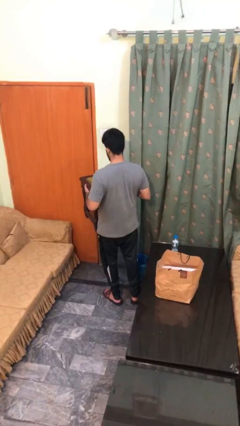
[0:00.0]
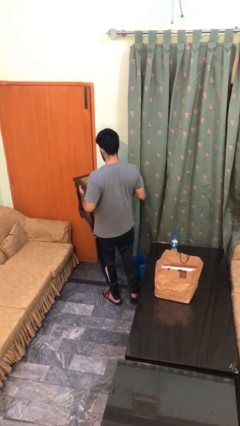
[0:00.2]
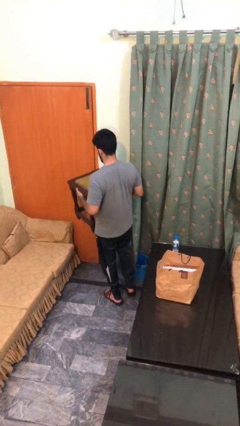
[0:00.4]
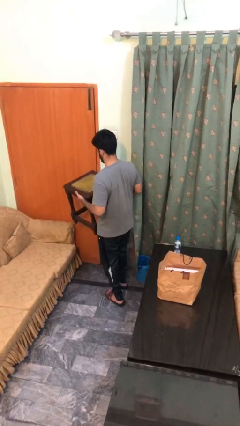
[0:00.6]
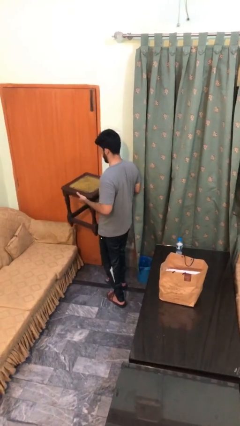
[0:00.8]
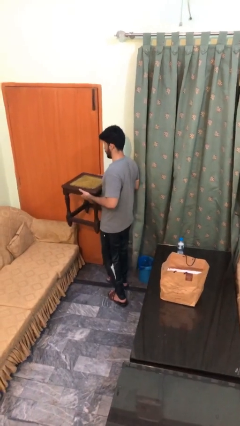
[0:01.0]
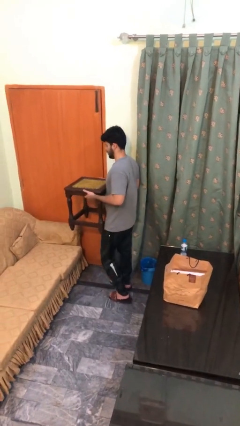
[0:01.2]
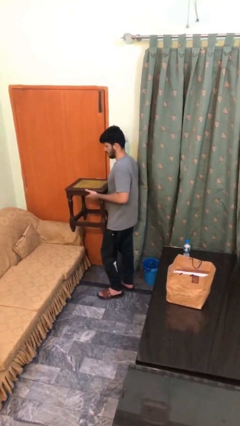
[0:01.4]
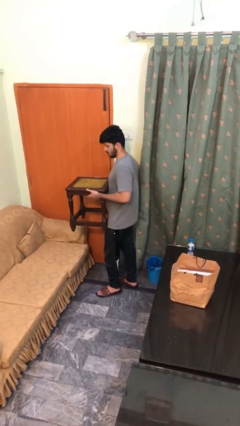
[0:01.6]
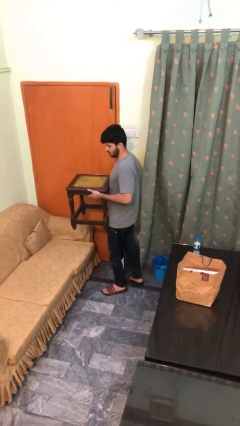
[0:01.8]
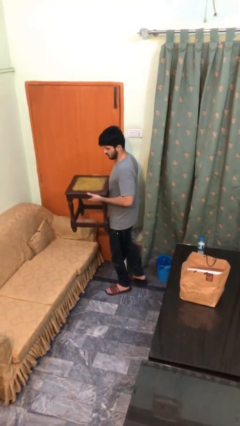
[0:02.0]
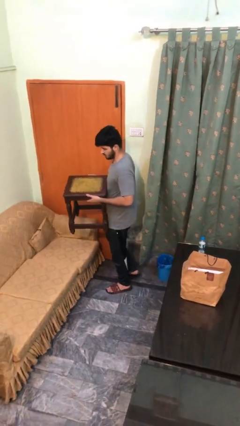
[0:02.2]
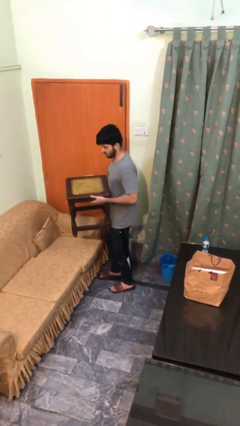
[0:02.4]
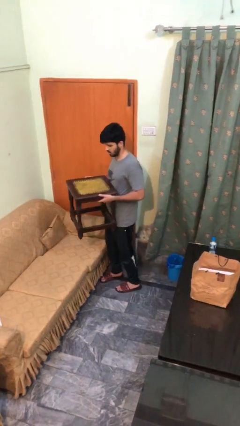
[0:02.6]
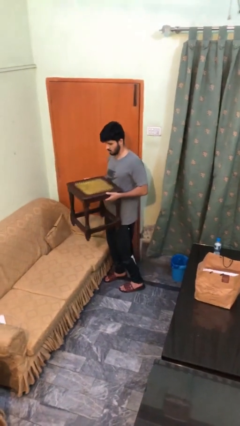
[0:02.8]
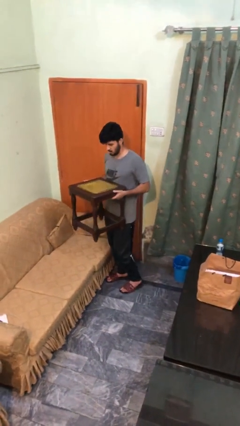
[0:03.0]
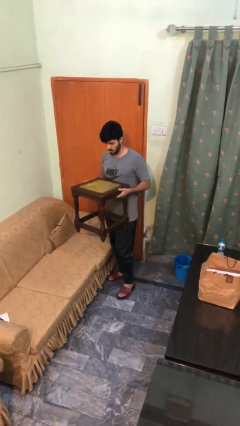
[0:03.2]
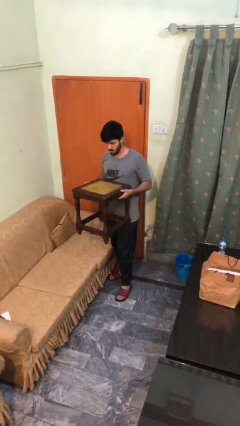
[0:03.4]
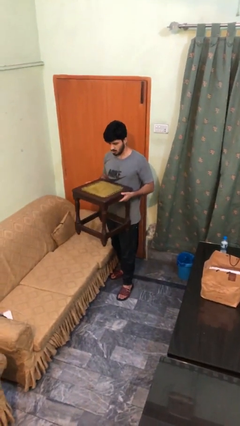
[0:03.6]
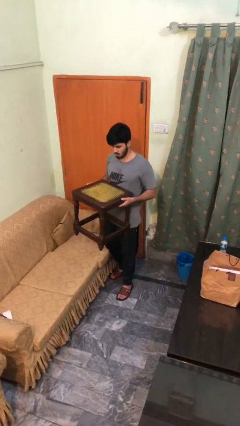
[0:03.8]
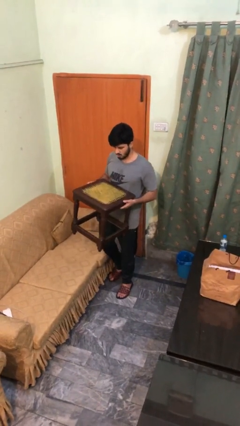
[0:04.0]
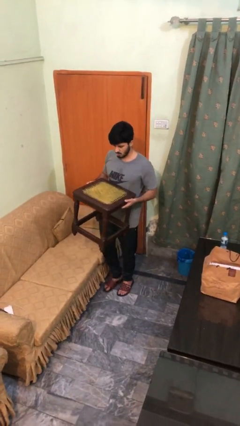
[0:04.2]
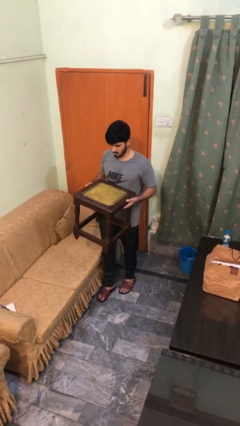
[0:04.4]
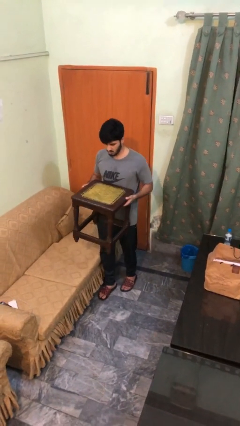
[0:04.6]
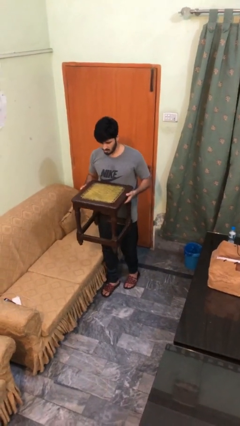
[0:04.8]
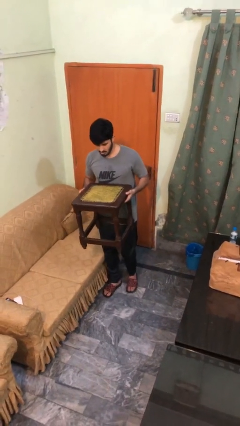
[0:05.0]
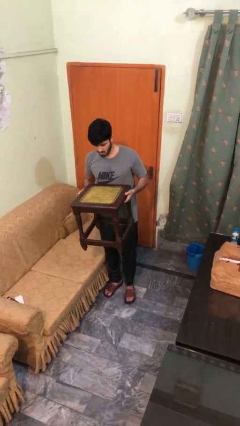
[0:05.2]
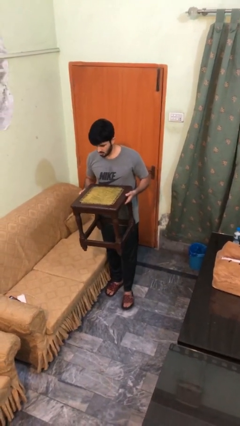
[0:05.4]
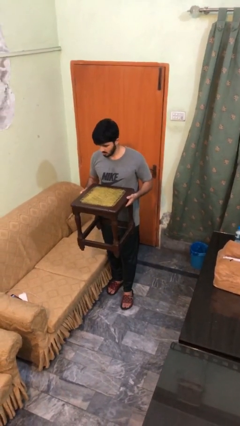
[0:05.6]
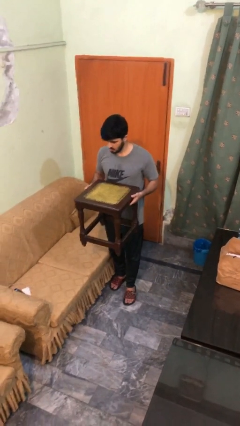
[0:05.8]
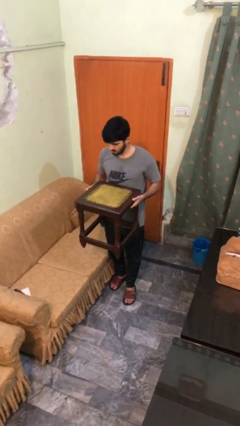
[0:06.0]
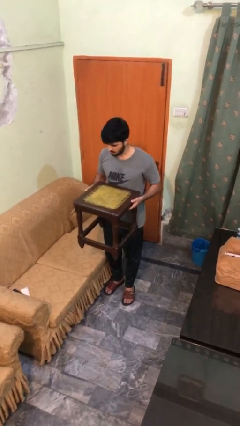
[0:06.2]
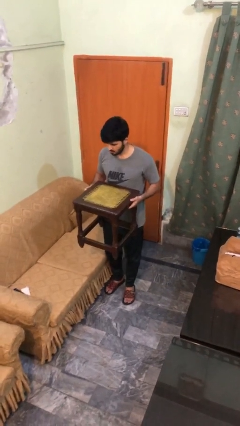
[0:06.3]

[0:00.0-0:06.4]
person carries furniture

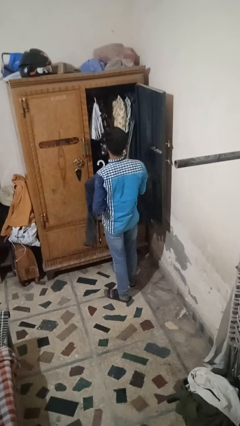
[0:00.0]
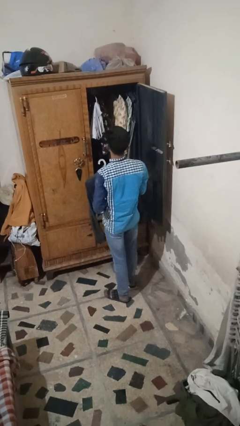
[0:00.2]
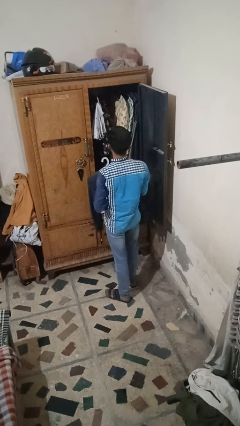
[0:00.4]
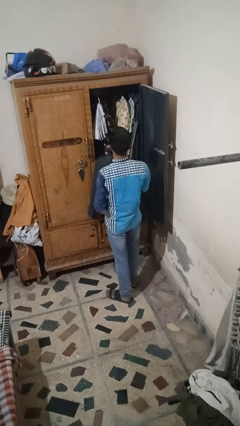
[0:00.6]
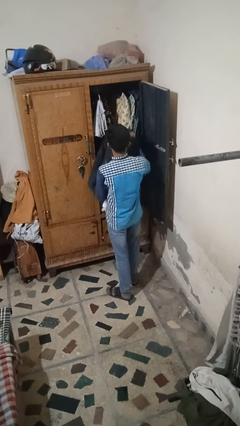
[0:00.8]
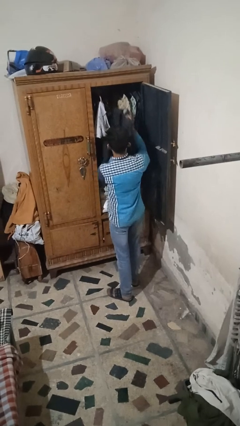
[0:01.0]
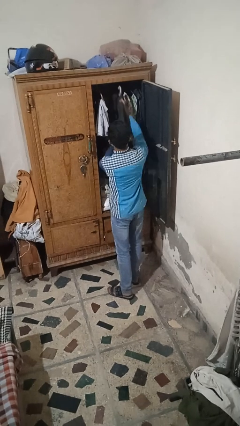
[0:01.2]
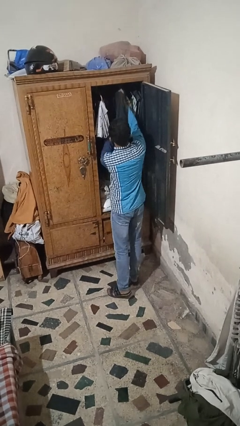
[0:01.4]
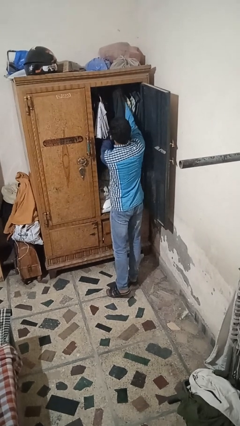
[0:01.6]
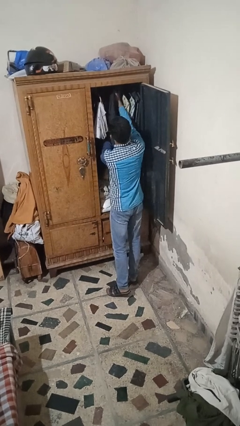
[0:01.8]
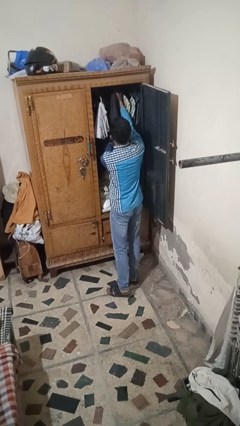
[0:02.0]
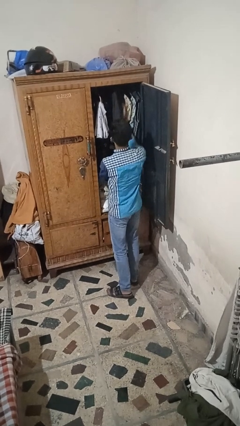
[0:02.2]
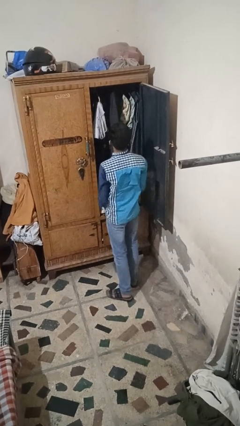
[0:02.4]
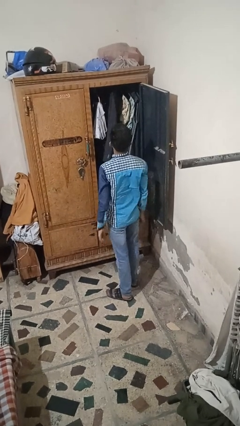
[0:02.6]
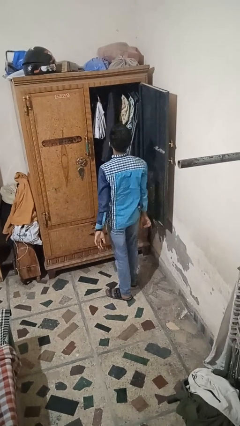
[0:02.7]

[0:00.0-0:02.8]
person puts clothes into closet

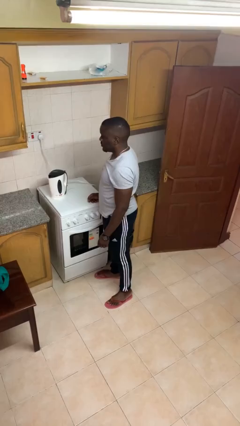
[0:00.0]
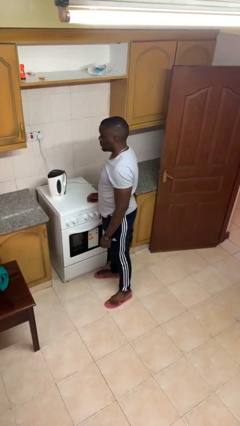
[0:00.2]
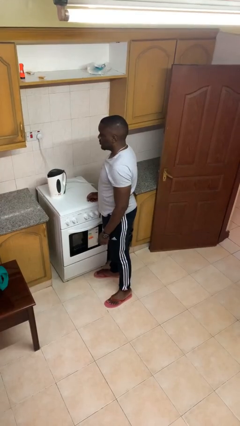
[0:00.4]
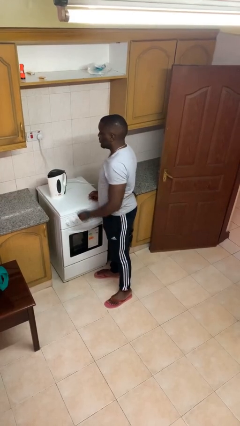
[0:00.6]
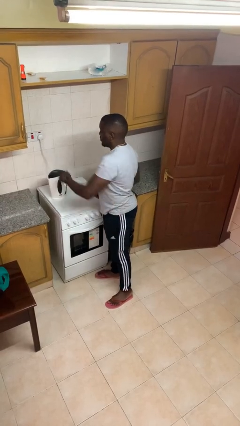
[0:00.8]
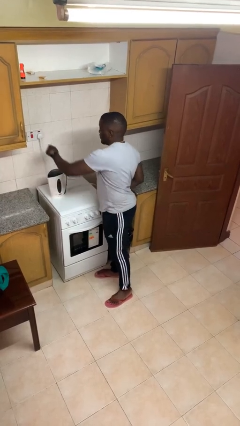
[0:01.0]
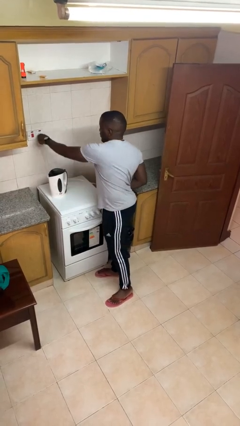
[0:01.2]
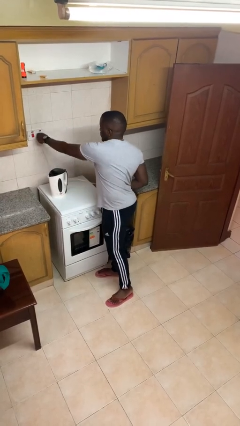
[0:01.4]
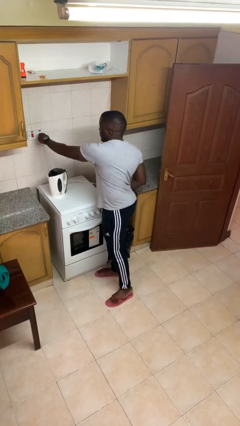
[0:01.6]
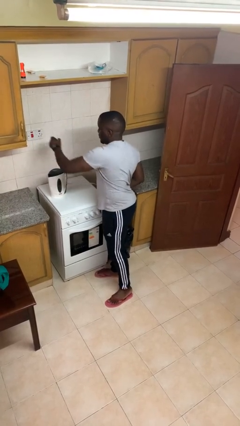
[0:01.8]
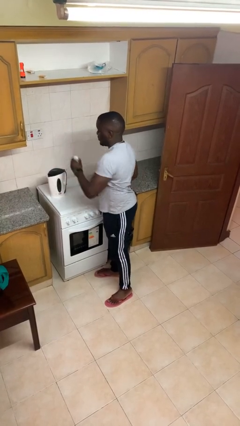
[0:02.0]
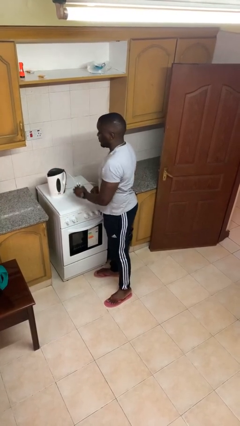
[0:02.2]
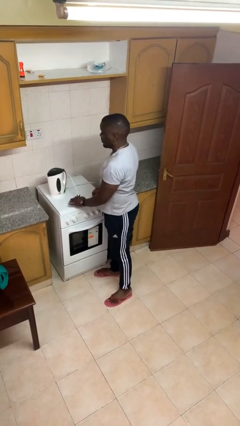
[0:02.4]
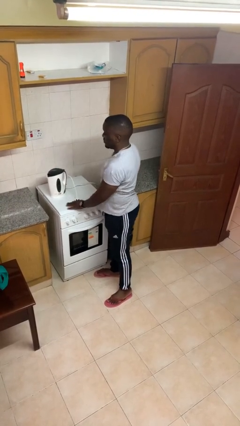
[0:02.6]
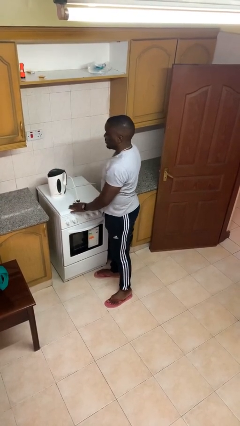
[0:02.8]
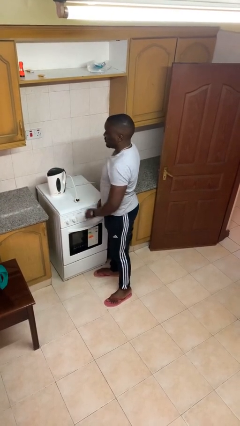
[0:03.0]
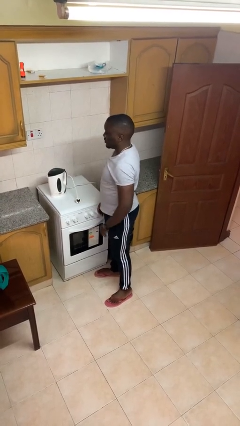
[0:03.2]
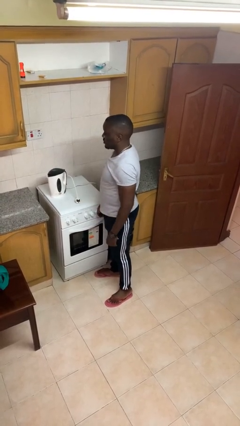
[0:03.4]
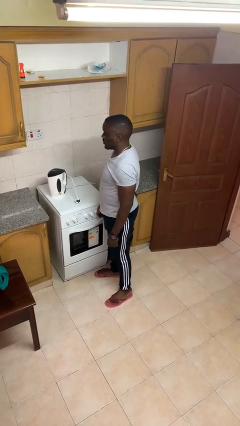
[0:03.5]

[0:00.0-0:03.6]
person unplugs from electrical socket

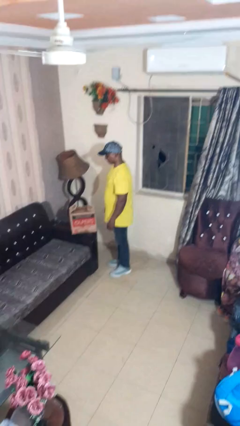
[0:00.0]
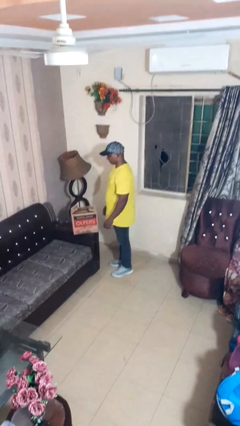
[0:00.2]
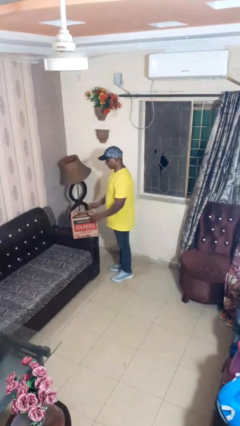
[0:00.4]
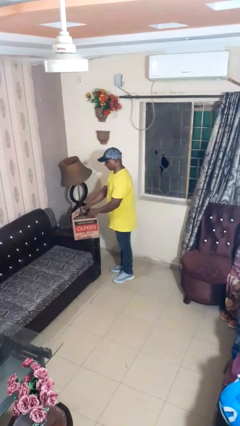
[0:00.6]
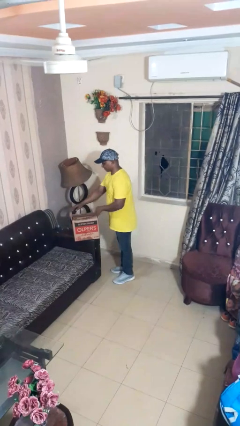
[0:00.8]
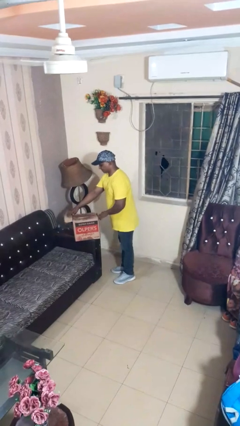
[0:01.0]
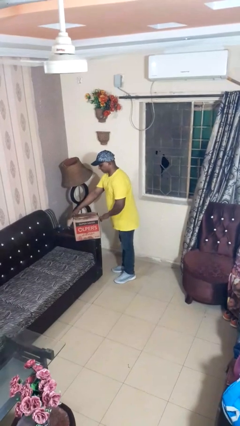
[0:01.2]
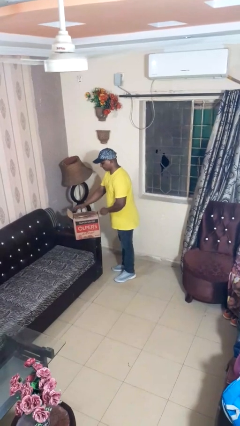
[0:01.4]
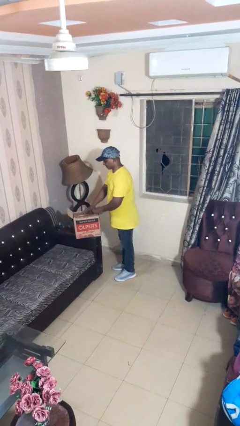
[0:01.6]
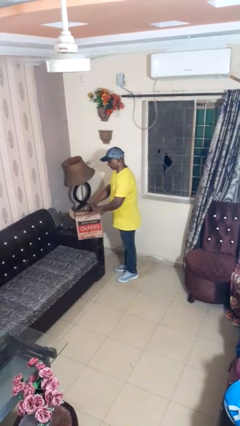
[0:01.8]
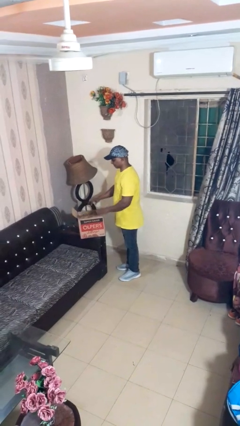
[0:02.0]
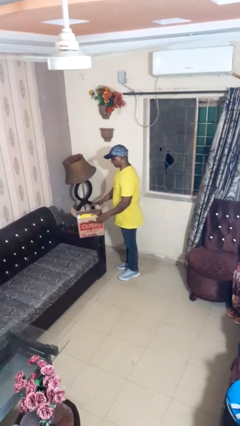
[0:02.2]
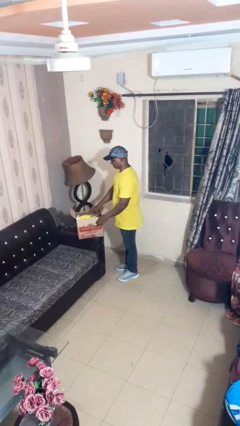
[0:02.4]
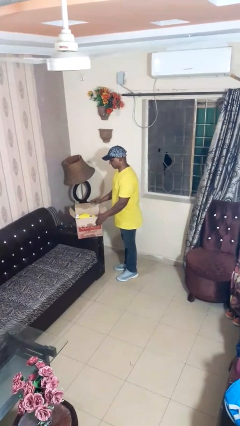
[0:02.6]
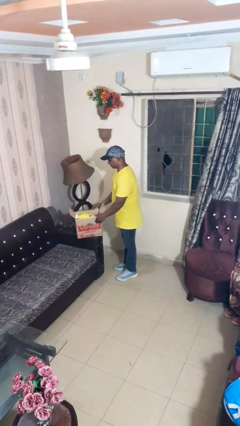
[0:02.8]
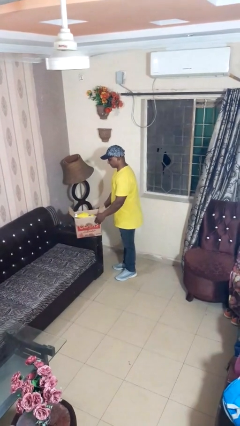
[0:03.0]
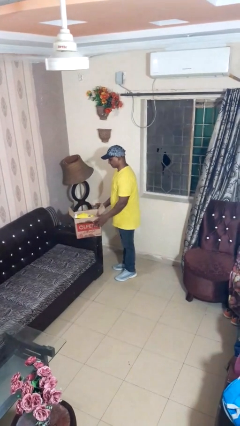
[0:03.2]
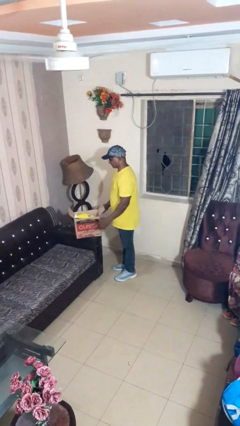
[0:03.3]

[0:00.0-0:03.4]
person opens box

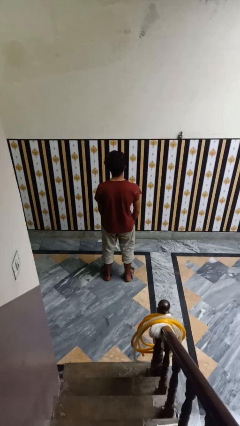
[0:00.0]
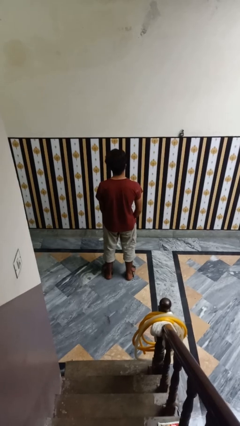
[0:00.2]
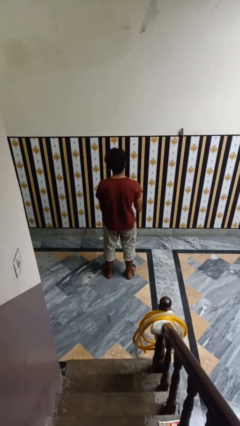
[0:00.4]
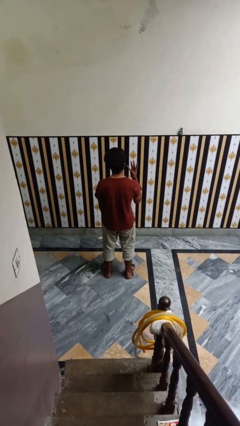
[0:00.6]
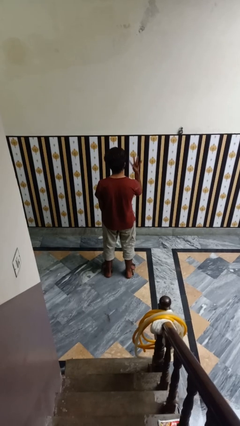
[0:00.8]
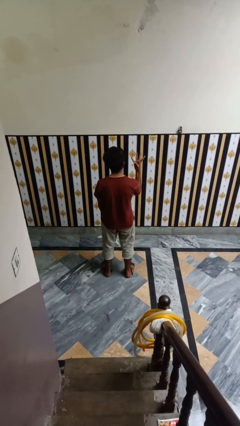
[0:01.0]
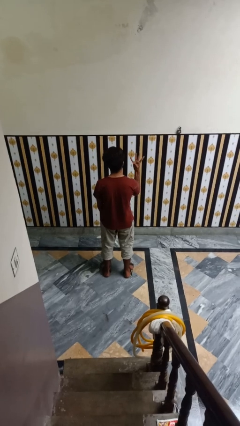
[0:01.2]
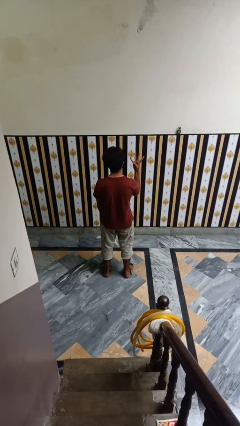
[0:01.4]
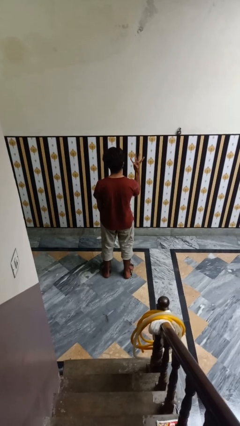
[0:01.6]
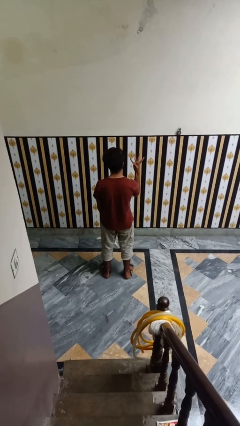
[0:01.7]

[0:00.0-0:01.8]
person gestures number four
